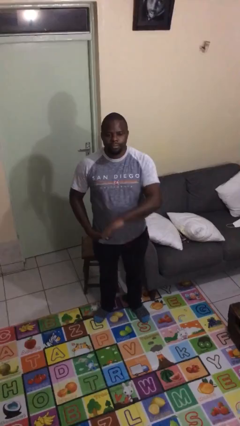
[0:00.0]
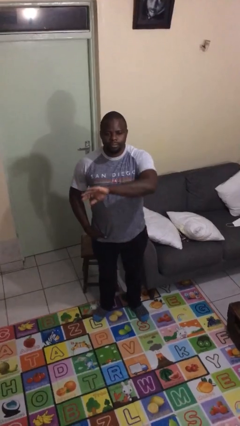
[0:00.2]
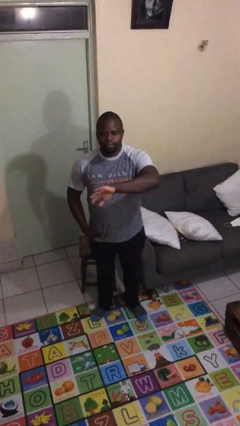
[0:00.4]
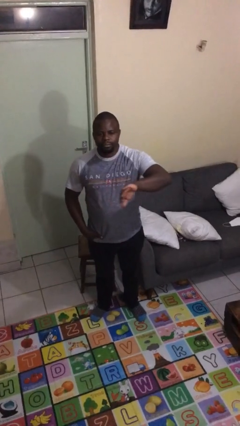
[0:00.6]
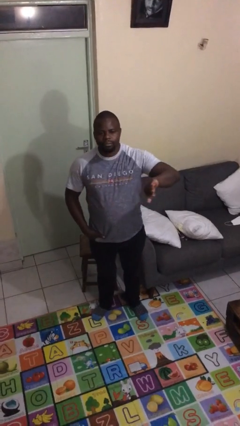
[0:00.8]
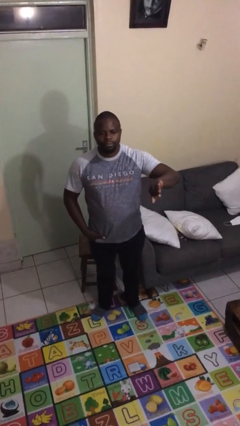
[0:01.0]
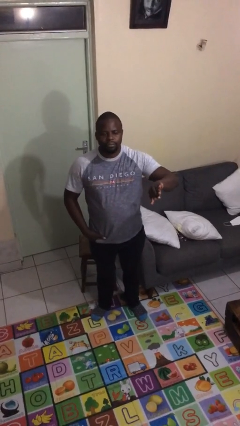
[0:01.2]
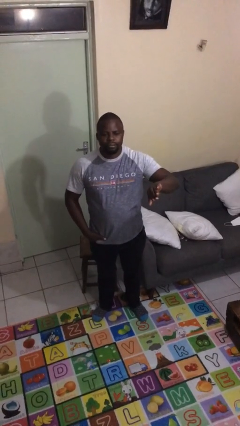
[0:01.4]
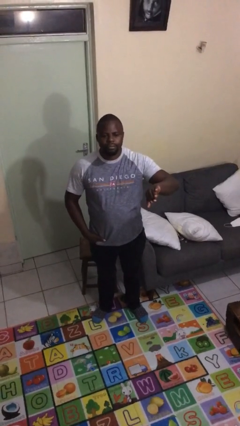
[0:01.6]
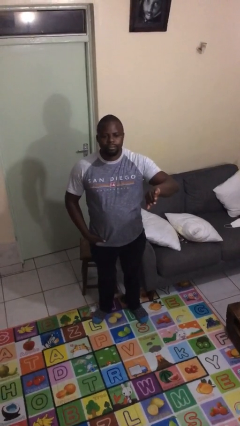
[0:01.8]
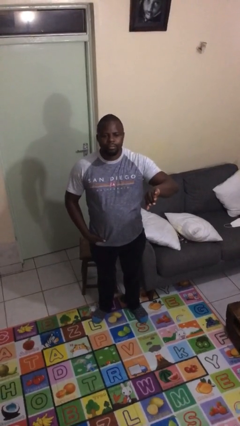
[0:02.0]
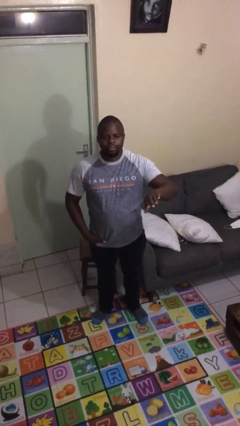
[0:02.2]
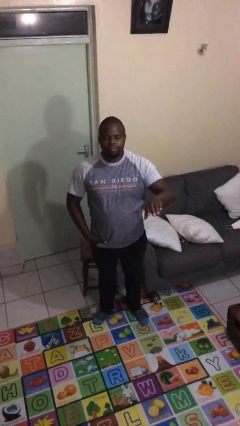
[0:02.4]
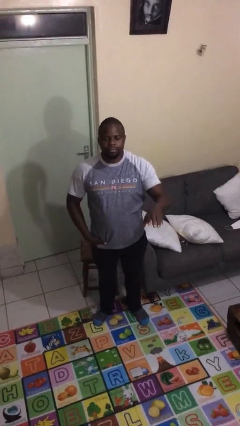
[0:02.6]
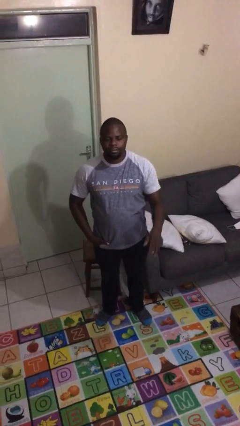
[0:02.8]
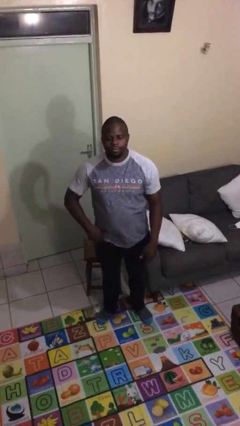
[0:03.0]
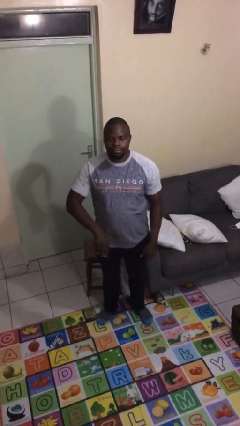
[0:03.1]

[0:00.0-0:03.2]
person gestures swipe left

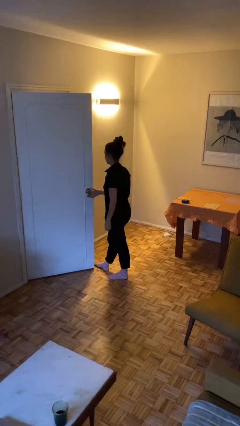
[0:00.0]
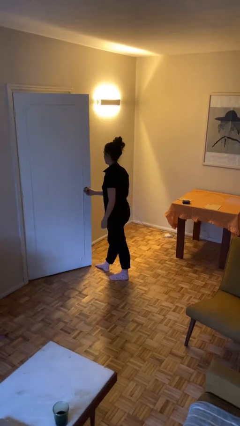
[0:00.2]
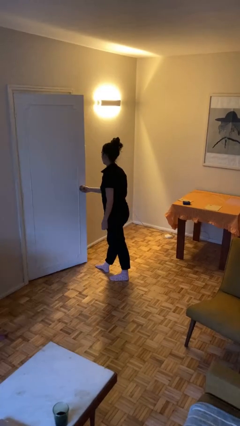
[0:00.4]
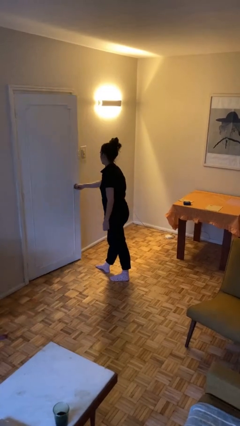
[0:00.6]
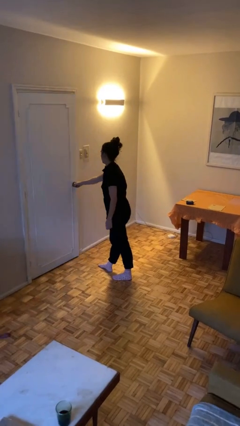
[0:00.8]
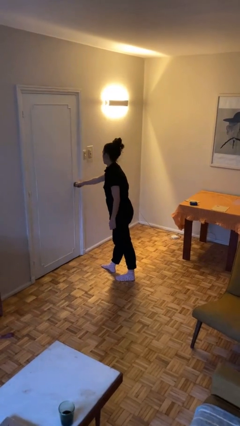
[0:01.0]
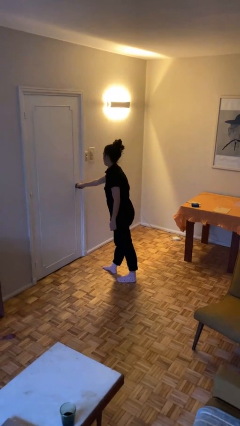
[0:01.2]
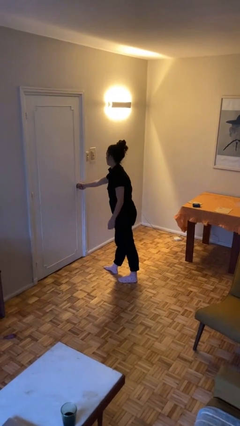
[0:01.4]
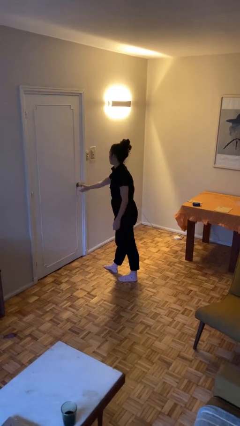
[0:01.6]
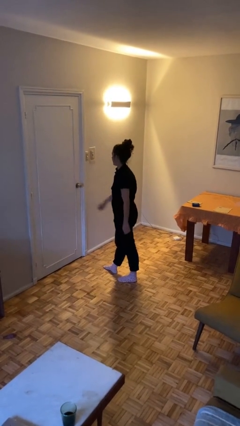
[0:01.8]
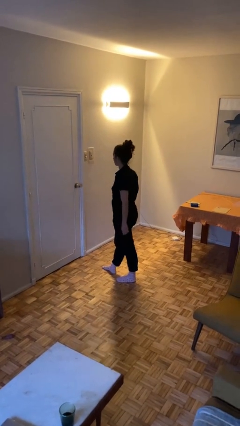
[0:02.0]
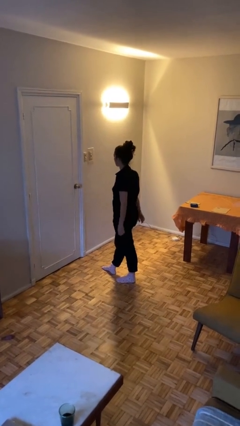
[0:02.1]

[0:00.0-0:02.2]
person closes facility door

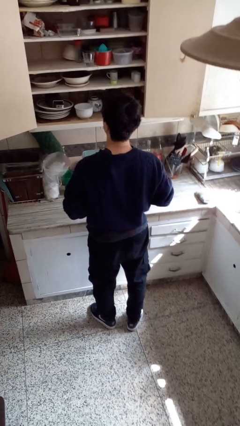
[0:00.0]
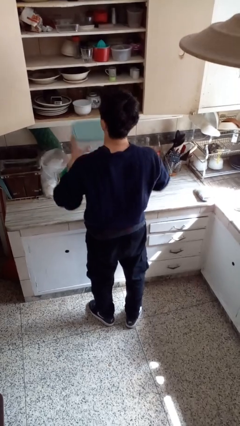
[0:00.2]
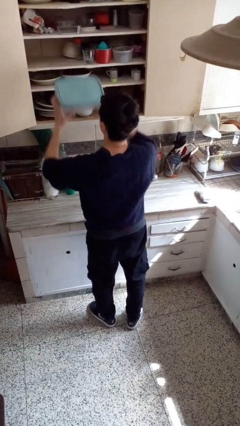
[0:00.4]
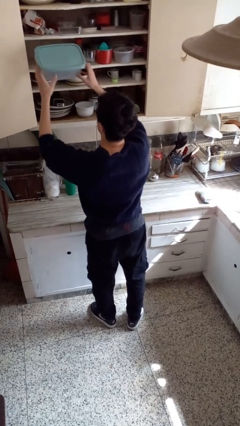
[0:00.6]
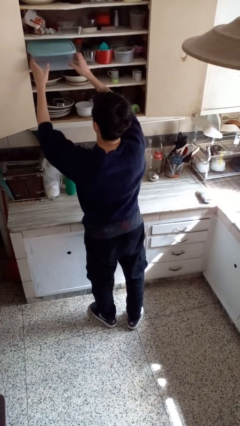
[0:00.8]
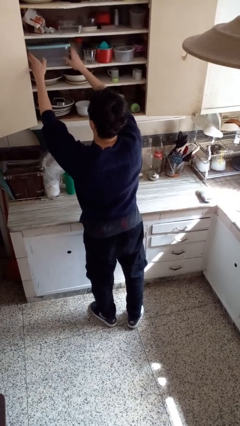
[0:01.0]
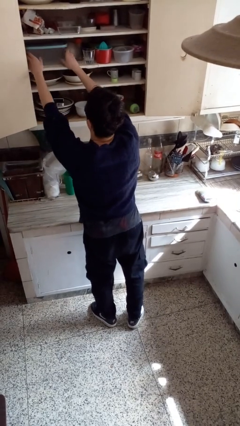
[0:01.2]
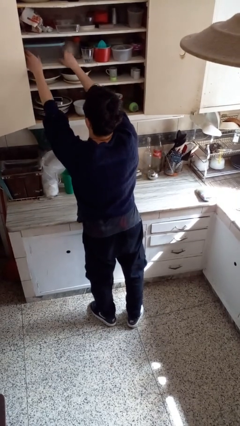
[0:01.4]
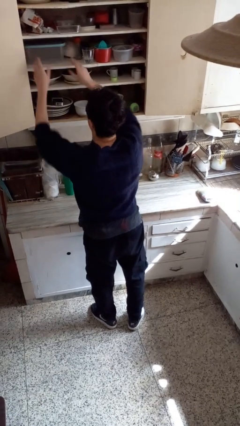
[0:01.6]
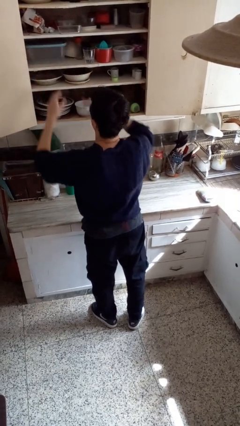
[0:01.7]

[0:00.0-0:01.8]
person puts down object into cabinet

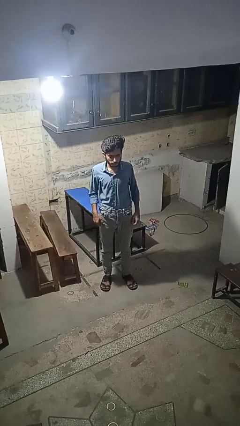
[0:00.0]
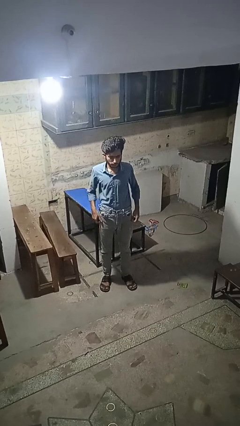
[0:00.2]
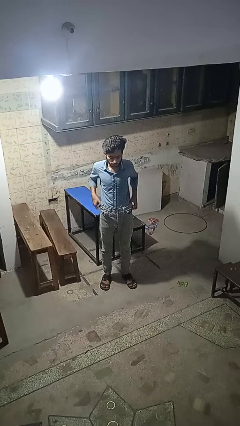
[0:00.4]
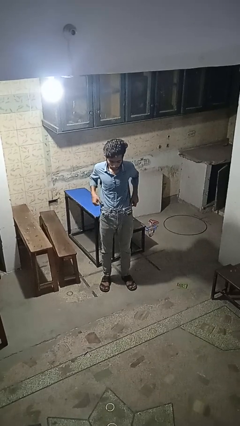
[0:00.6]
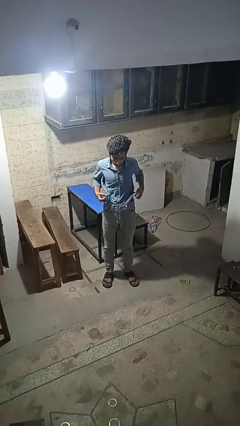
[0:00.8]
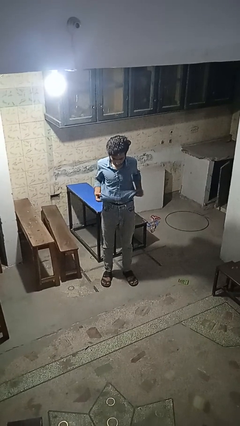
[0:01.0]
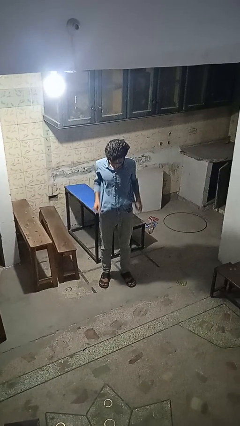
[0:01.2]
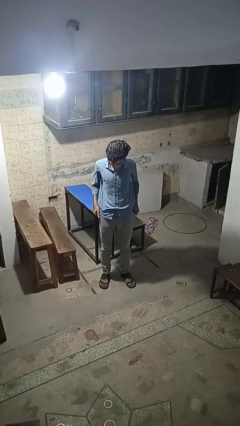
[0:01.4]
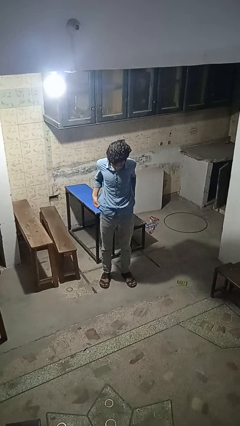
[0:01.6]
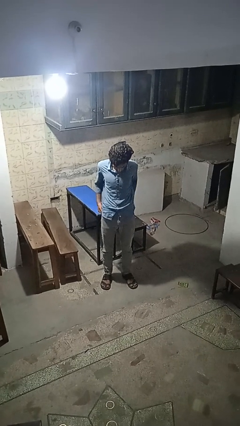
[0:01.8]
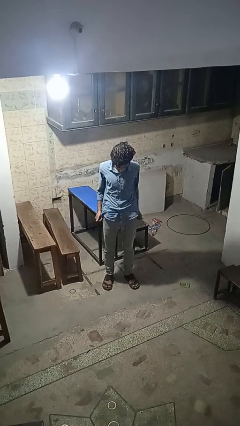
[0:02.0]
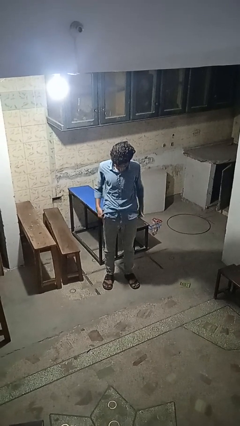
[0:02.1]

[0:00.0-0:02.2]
person untucks shirt

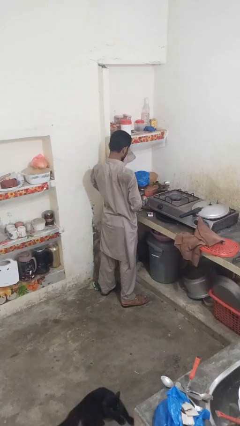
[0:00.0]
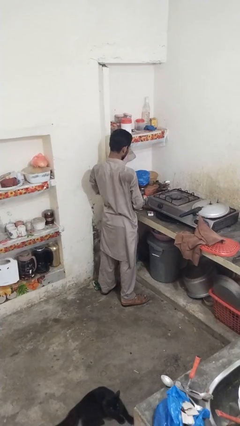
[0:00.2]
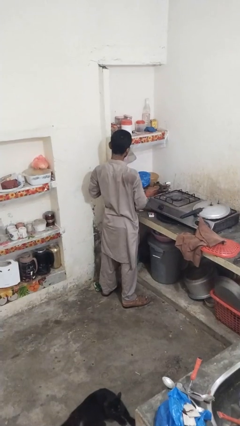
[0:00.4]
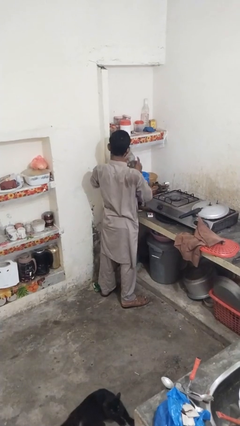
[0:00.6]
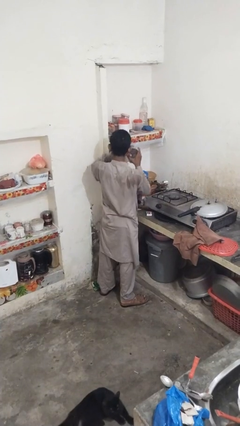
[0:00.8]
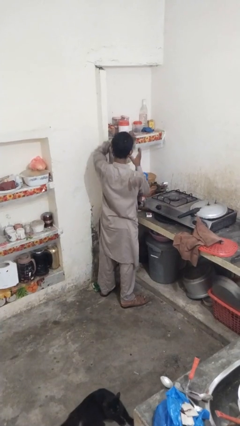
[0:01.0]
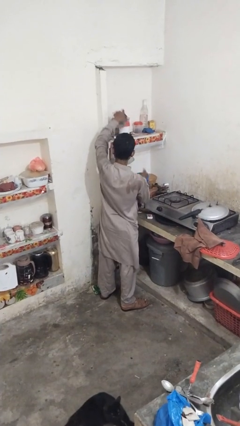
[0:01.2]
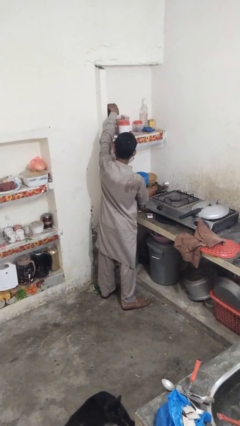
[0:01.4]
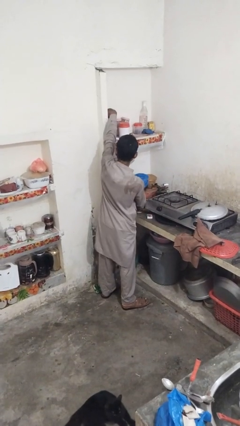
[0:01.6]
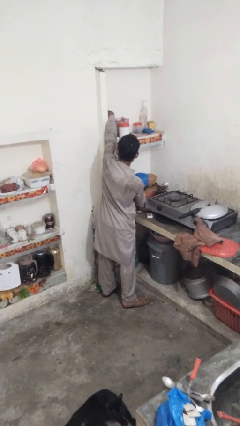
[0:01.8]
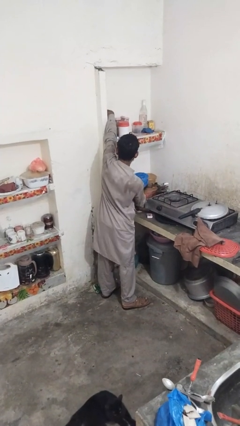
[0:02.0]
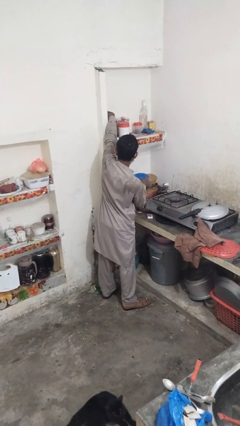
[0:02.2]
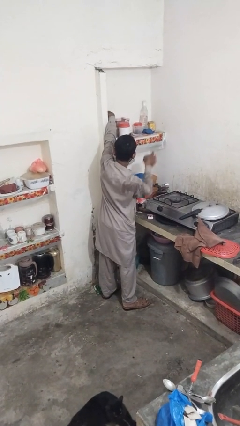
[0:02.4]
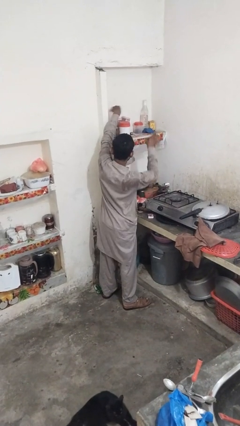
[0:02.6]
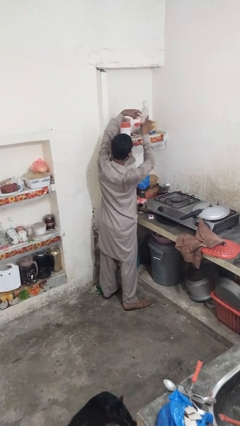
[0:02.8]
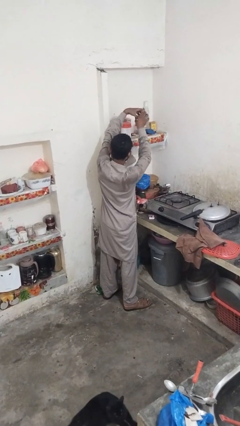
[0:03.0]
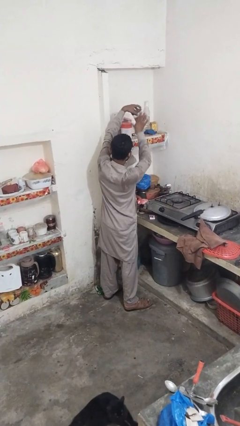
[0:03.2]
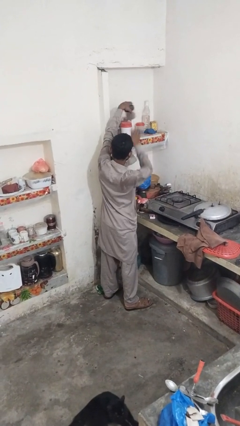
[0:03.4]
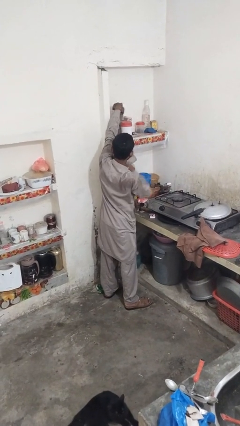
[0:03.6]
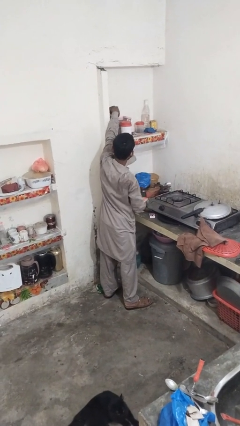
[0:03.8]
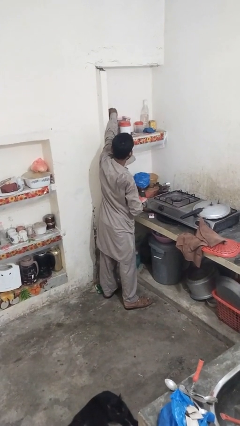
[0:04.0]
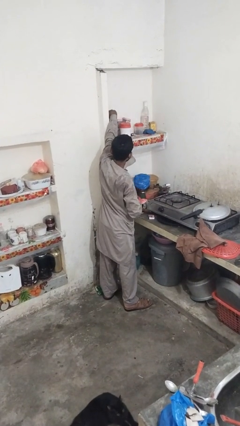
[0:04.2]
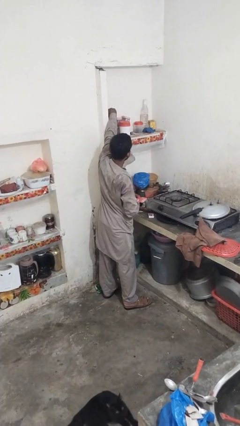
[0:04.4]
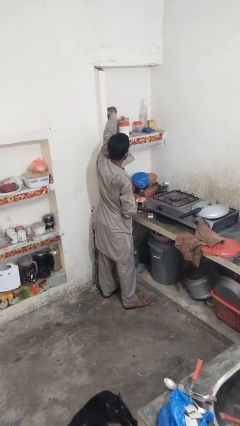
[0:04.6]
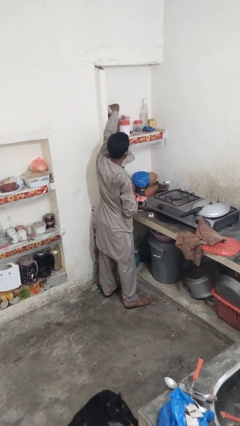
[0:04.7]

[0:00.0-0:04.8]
person loads groceries into cabinet

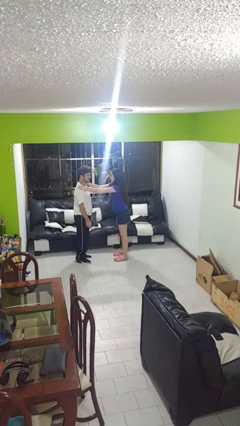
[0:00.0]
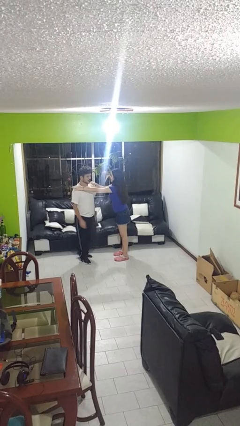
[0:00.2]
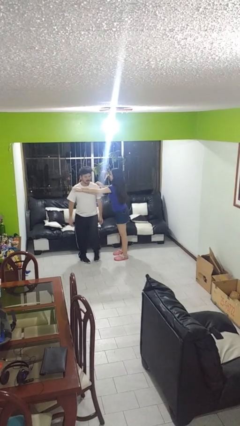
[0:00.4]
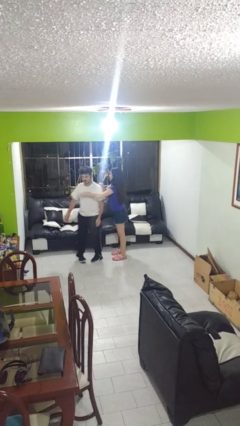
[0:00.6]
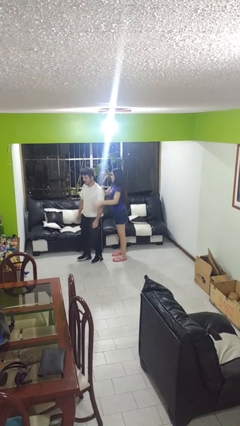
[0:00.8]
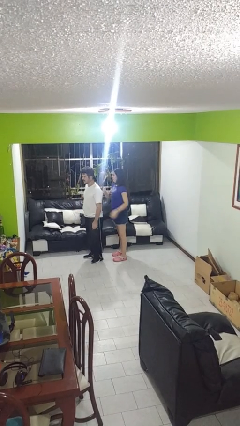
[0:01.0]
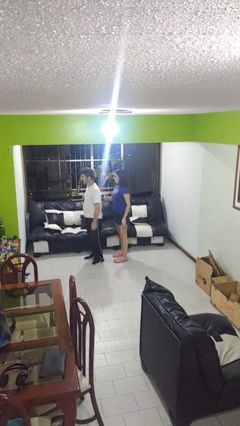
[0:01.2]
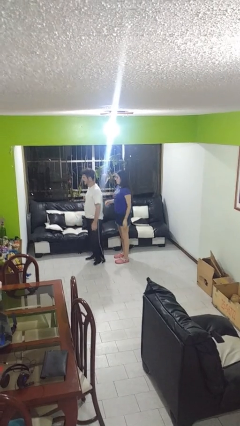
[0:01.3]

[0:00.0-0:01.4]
person spins person around

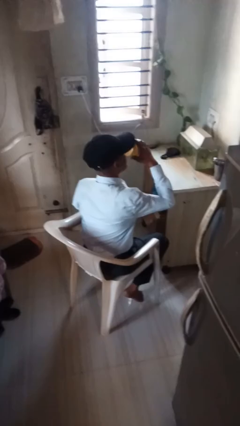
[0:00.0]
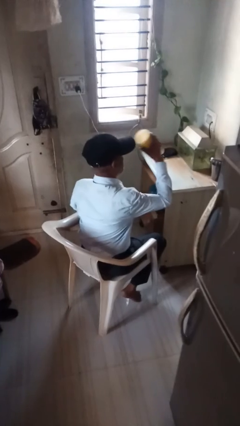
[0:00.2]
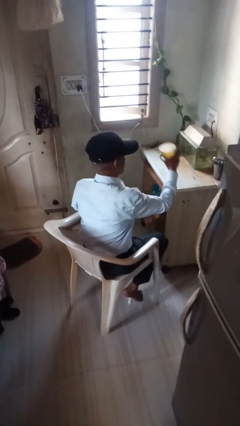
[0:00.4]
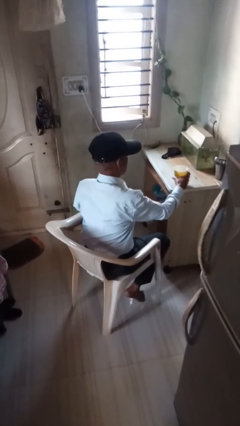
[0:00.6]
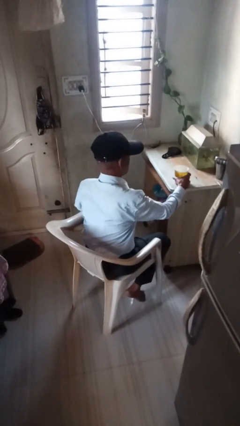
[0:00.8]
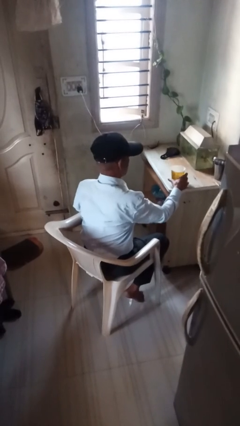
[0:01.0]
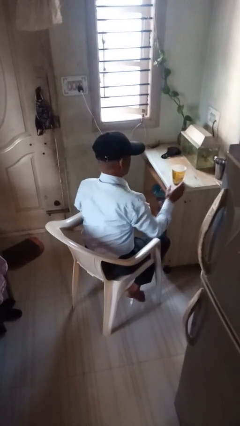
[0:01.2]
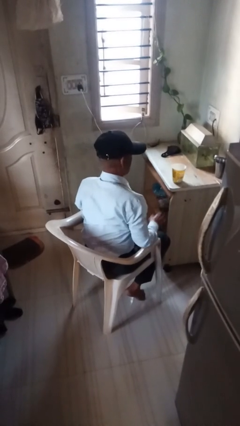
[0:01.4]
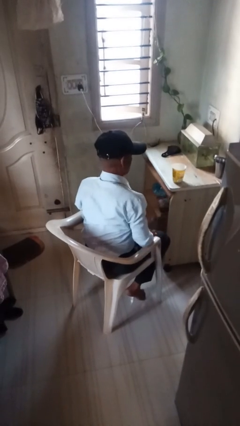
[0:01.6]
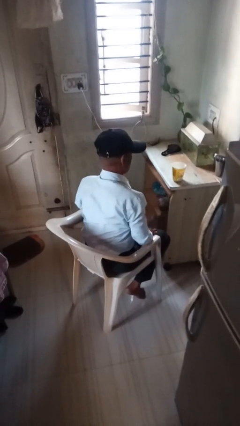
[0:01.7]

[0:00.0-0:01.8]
person puts down object on table
